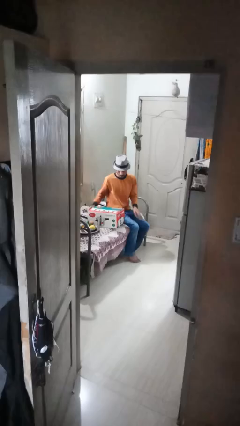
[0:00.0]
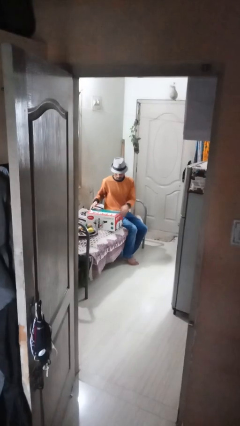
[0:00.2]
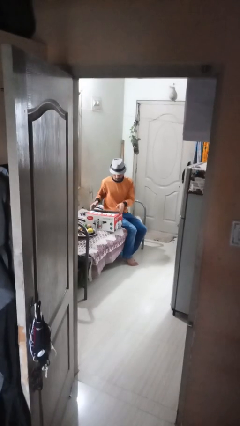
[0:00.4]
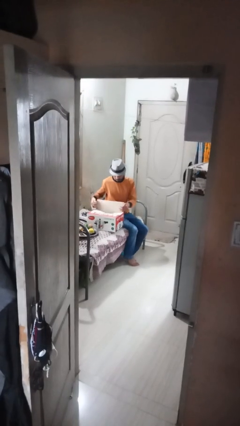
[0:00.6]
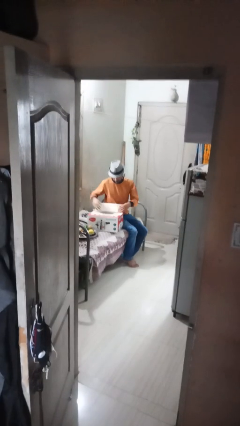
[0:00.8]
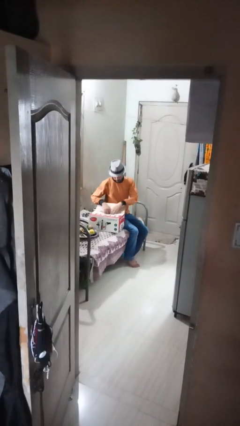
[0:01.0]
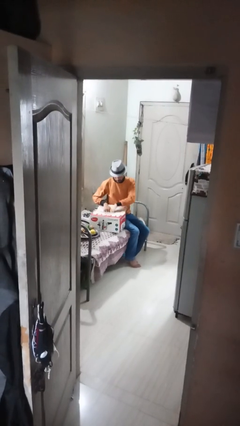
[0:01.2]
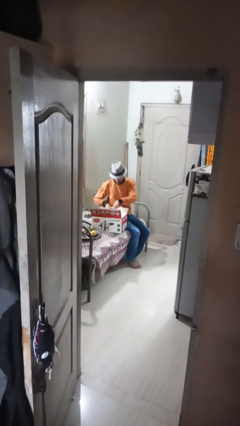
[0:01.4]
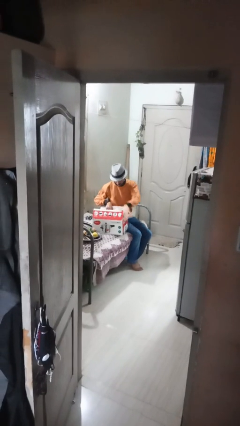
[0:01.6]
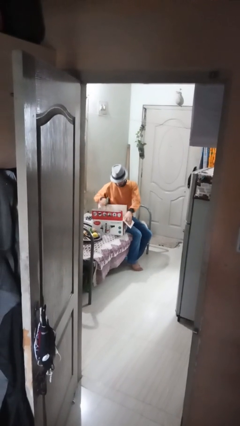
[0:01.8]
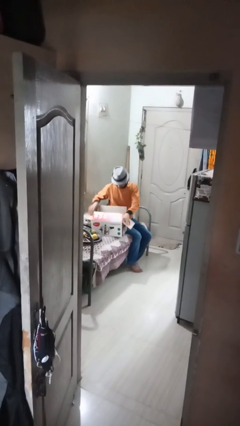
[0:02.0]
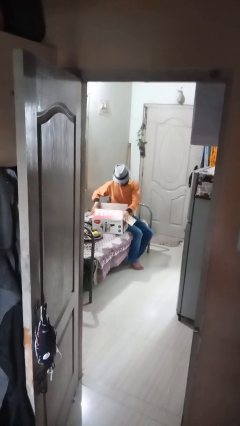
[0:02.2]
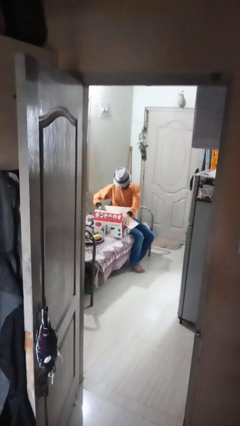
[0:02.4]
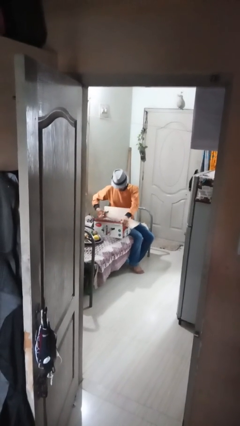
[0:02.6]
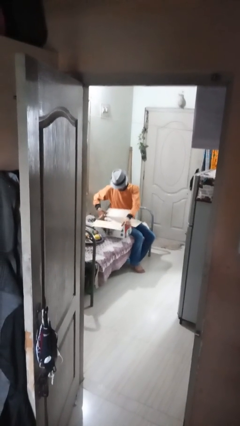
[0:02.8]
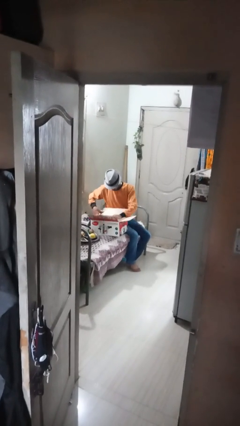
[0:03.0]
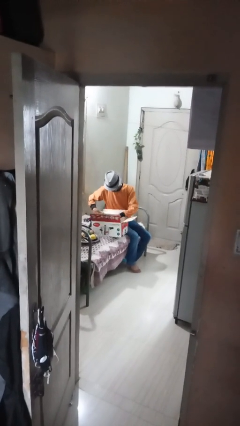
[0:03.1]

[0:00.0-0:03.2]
person searches in box

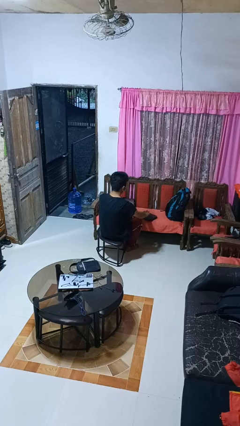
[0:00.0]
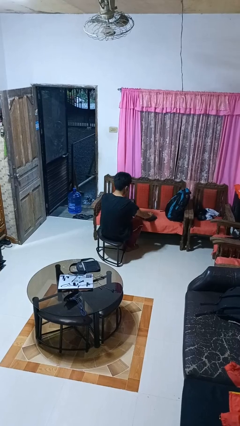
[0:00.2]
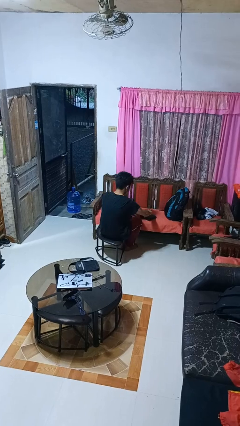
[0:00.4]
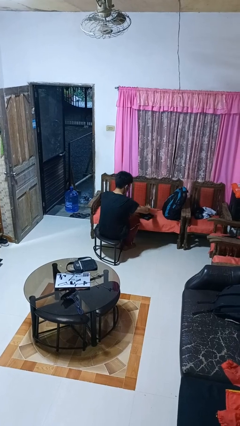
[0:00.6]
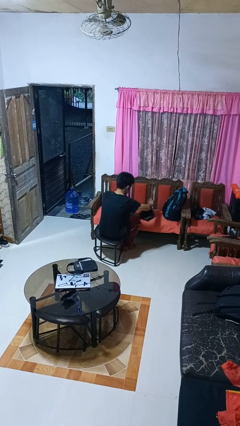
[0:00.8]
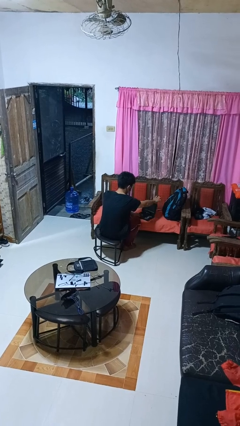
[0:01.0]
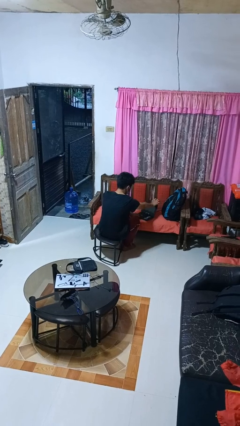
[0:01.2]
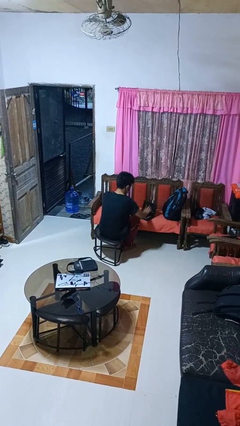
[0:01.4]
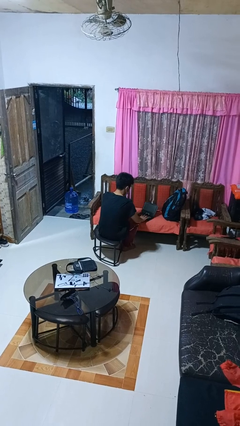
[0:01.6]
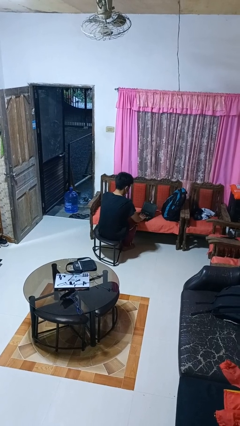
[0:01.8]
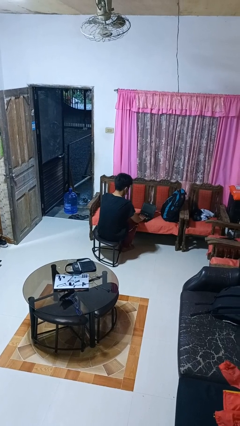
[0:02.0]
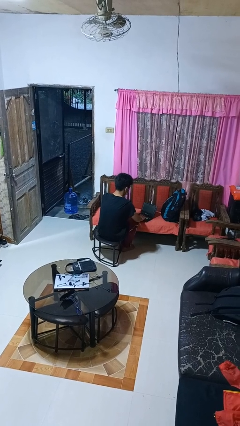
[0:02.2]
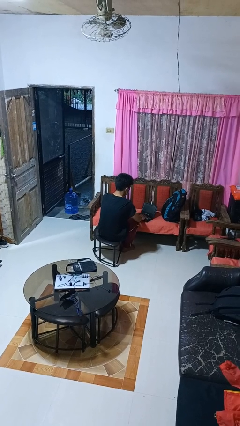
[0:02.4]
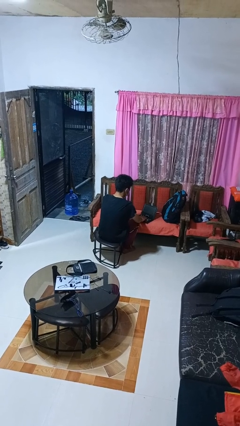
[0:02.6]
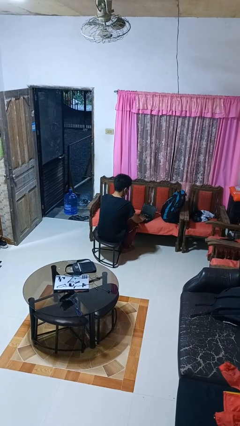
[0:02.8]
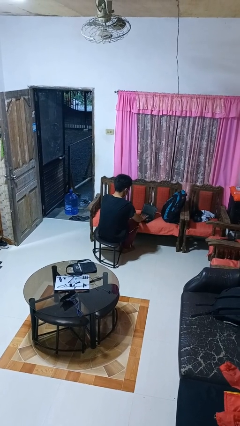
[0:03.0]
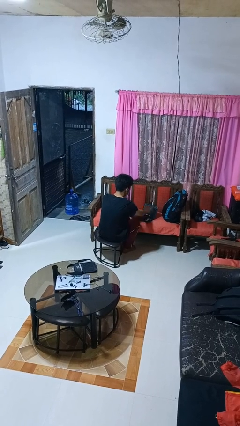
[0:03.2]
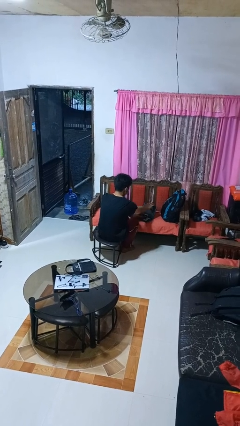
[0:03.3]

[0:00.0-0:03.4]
person opens laptop

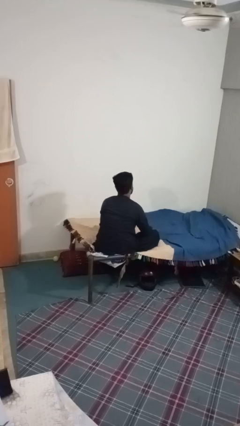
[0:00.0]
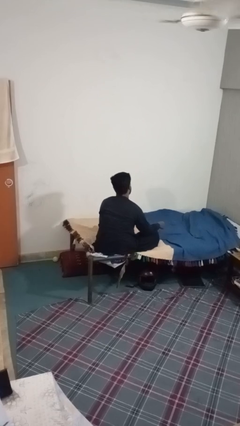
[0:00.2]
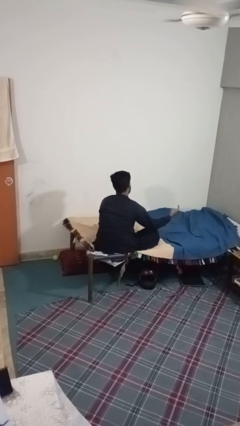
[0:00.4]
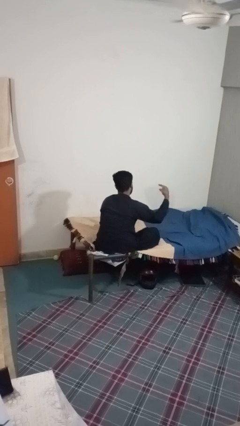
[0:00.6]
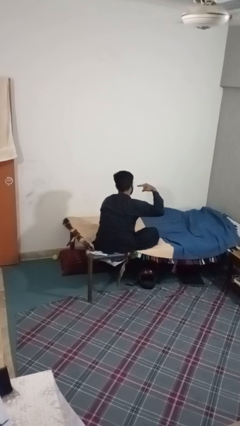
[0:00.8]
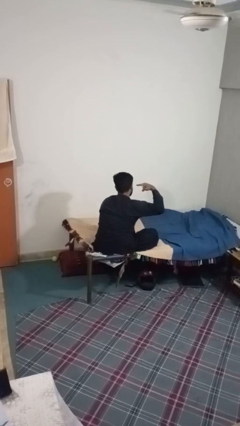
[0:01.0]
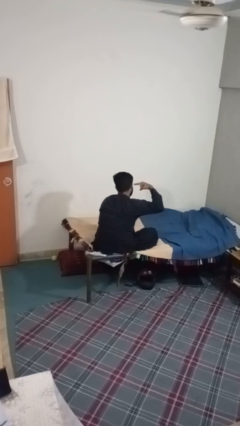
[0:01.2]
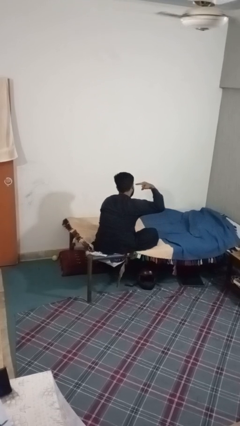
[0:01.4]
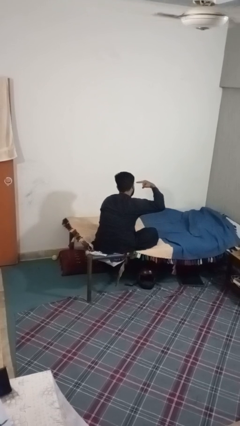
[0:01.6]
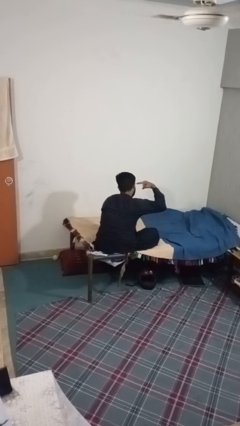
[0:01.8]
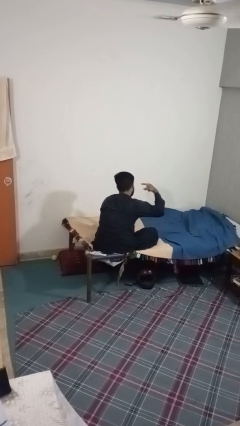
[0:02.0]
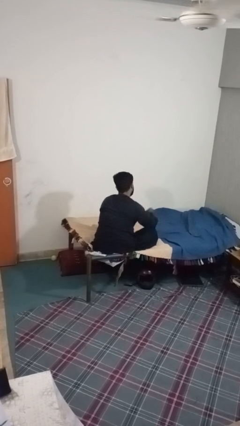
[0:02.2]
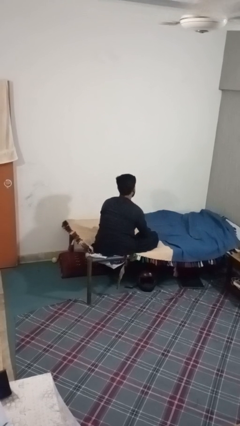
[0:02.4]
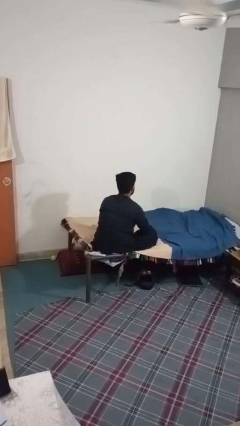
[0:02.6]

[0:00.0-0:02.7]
person gestures listen closely

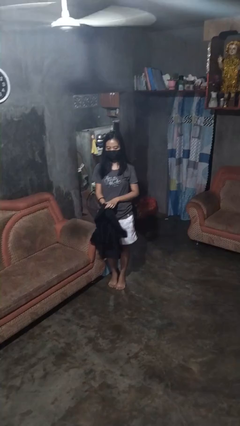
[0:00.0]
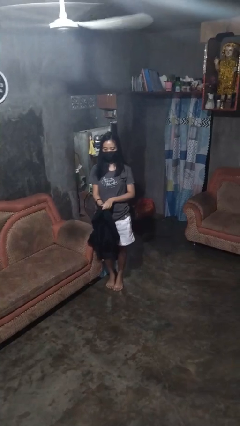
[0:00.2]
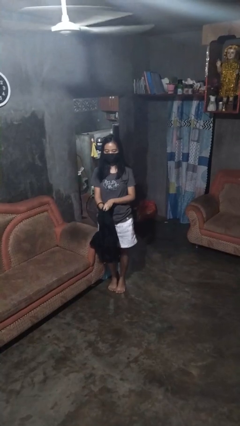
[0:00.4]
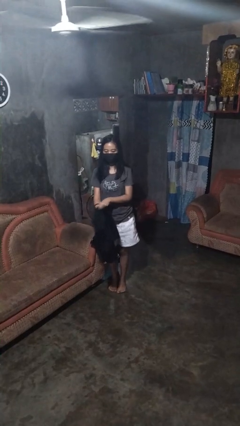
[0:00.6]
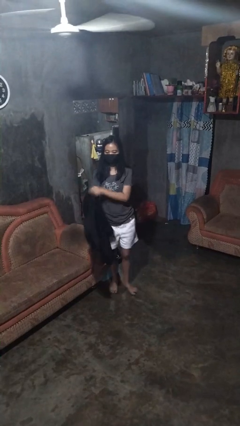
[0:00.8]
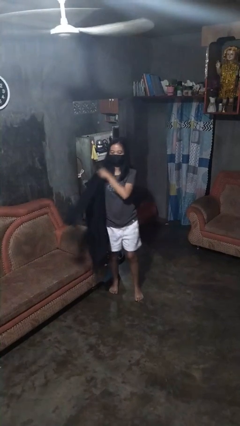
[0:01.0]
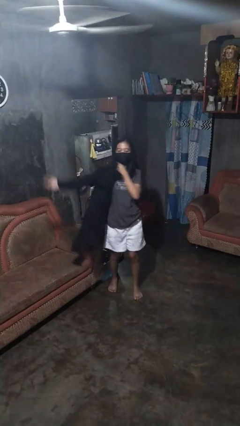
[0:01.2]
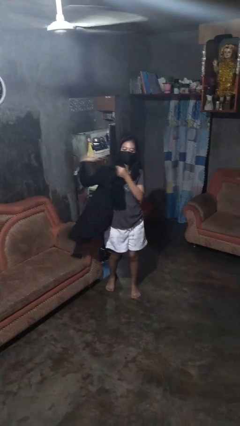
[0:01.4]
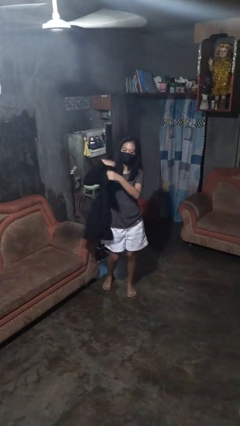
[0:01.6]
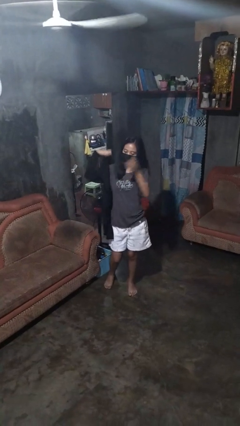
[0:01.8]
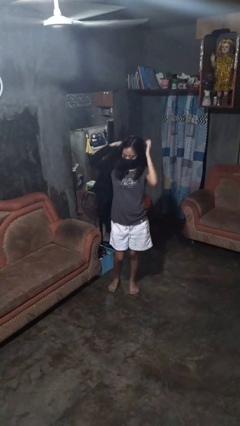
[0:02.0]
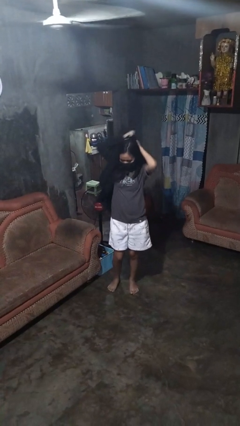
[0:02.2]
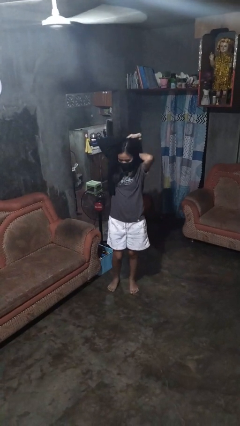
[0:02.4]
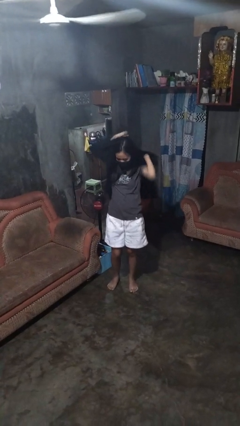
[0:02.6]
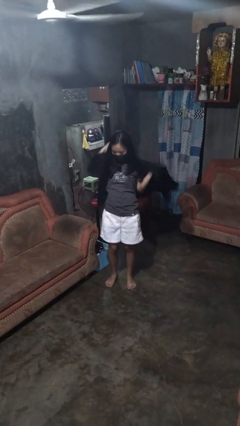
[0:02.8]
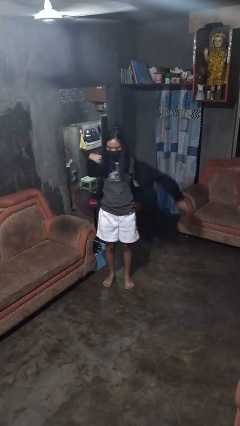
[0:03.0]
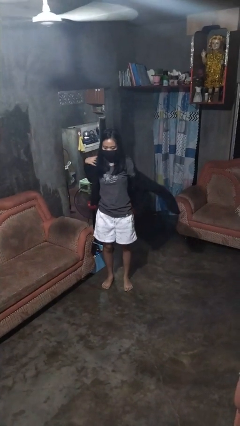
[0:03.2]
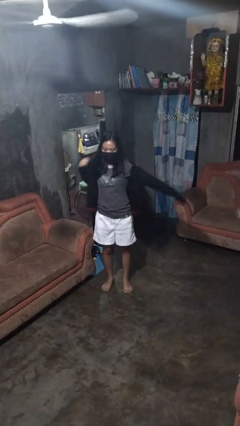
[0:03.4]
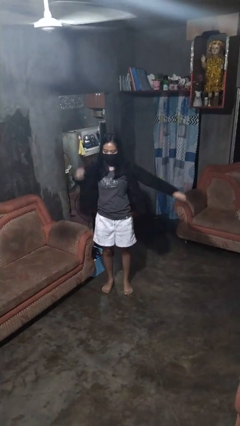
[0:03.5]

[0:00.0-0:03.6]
person puts on shirt

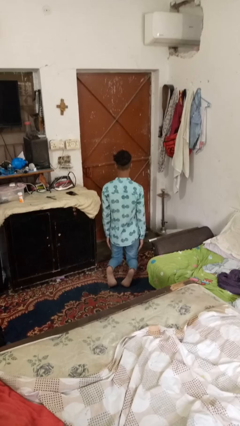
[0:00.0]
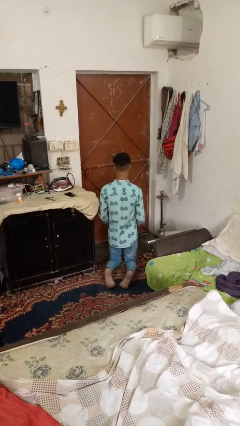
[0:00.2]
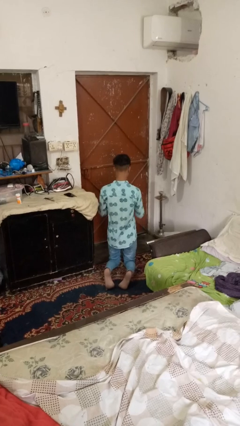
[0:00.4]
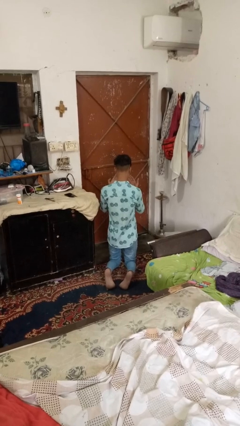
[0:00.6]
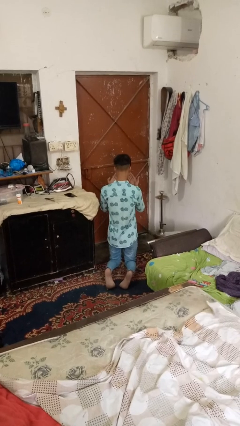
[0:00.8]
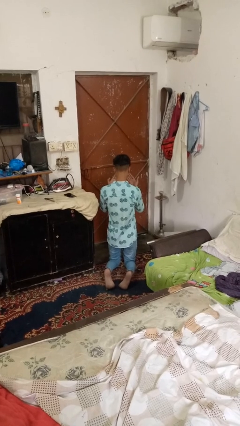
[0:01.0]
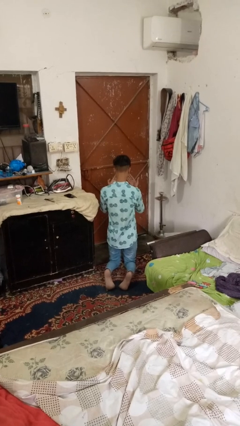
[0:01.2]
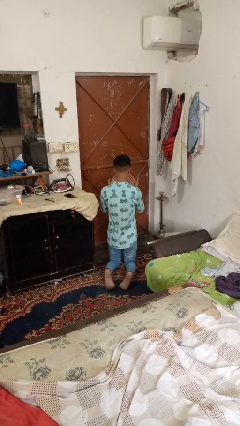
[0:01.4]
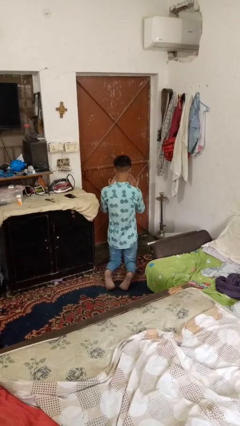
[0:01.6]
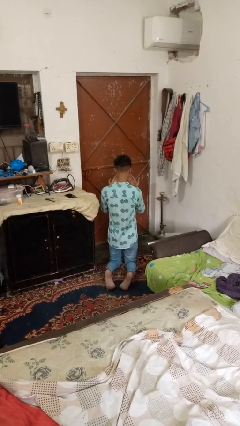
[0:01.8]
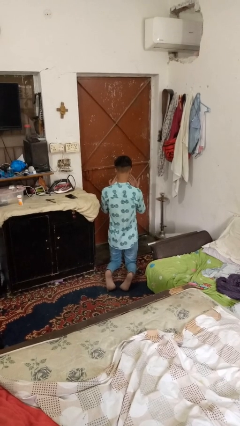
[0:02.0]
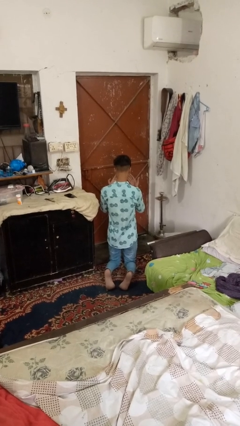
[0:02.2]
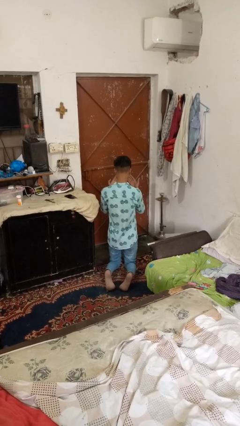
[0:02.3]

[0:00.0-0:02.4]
person prays

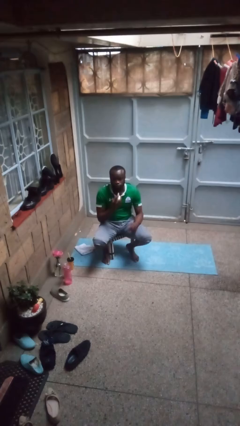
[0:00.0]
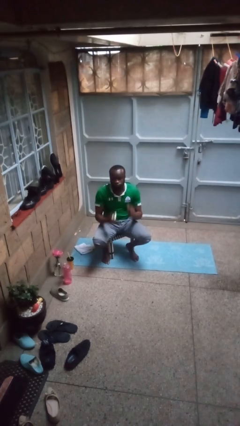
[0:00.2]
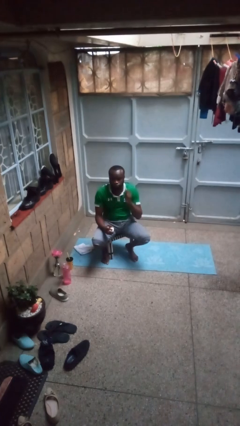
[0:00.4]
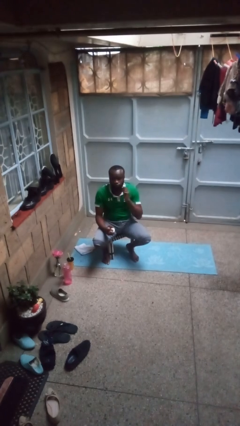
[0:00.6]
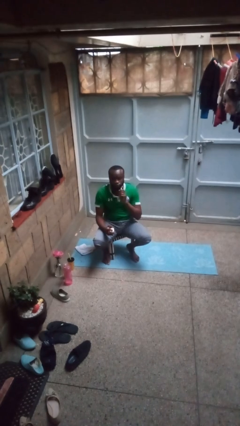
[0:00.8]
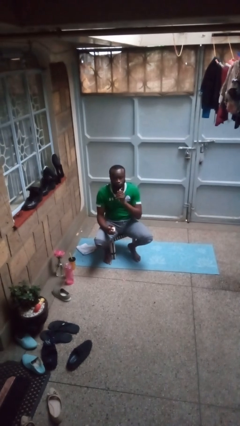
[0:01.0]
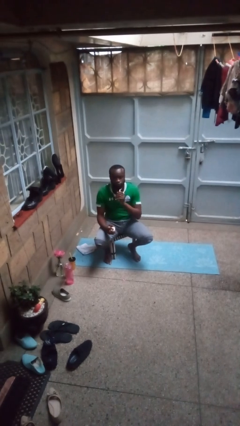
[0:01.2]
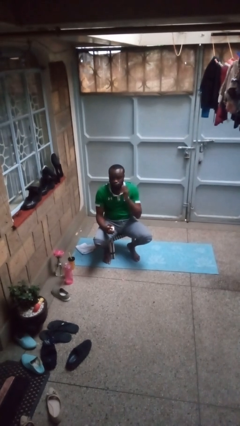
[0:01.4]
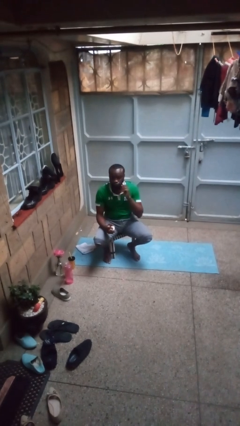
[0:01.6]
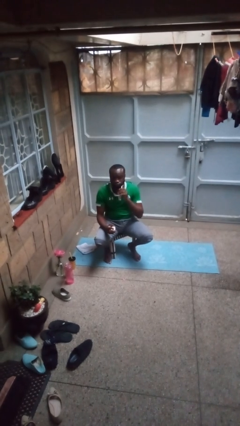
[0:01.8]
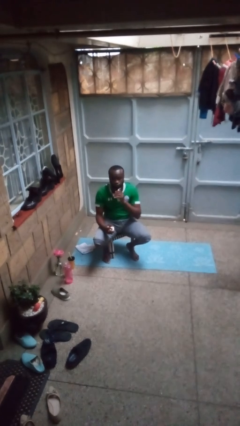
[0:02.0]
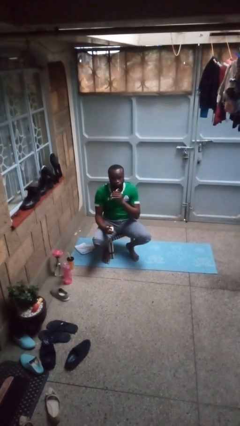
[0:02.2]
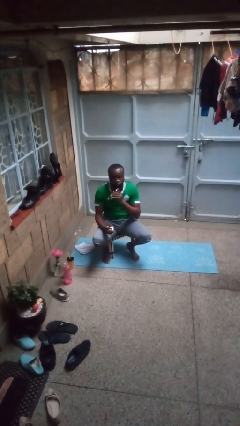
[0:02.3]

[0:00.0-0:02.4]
person shaves face
